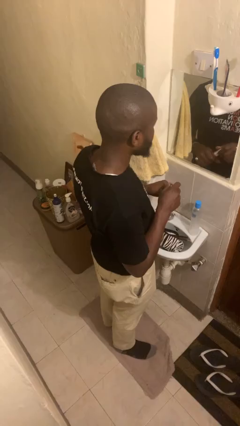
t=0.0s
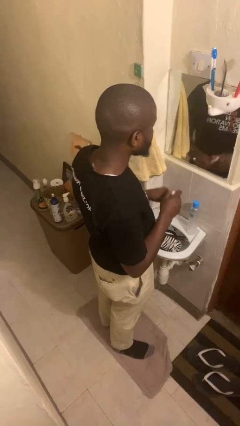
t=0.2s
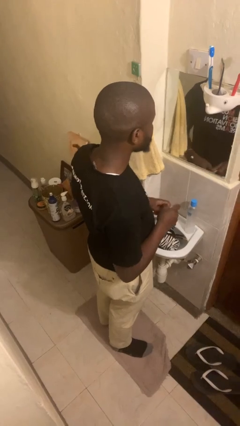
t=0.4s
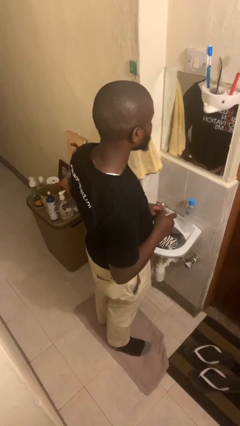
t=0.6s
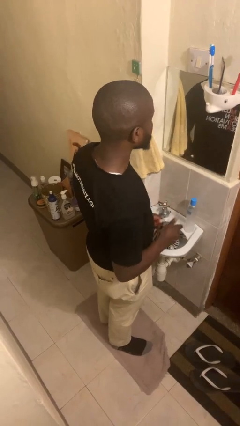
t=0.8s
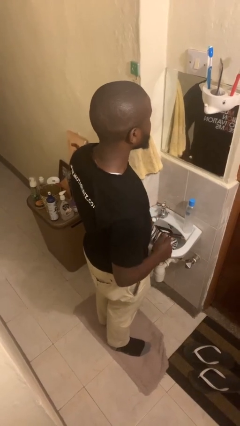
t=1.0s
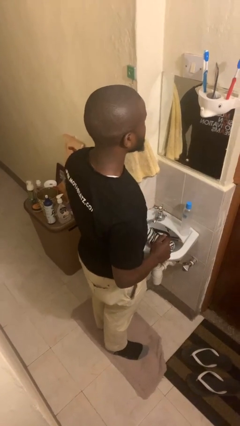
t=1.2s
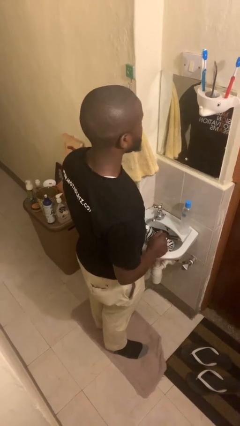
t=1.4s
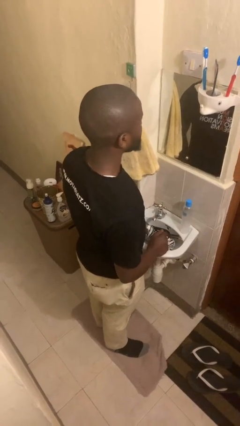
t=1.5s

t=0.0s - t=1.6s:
person applies lip makeup

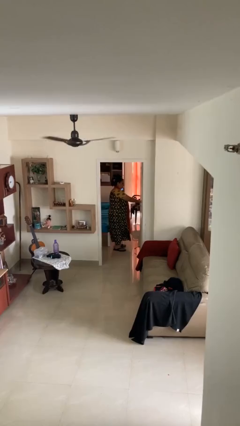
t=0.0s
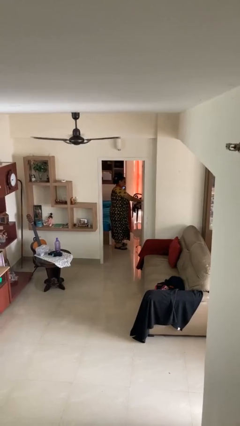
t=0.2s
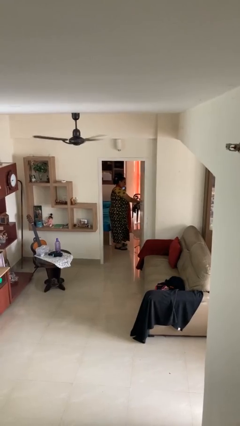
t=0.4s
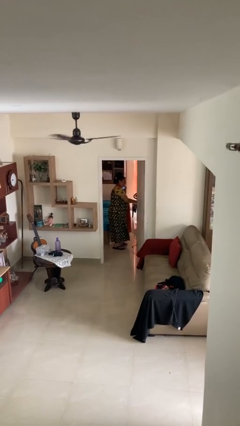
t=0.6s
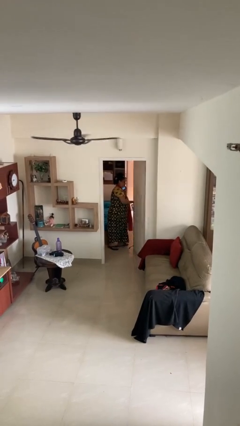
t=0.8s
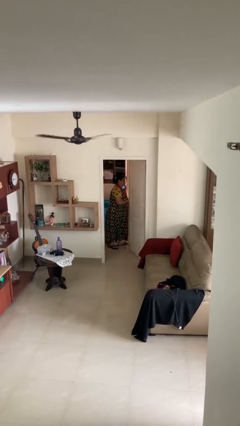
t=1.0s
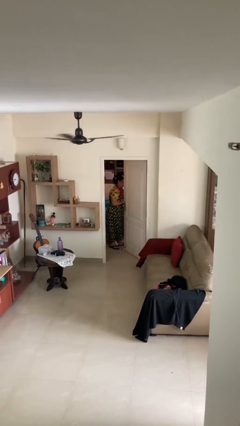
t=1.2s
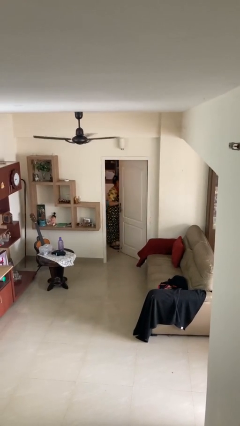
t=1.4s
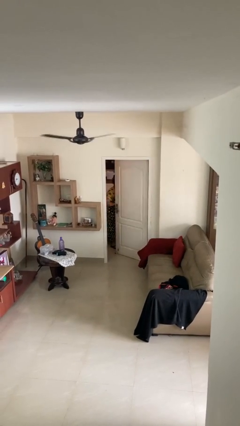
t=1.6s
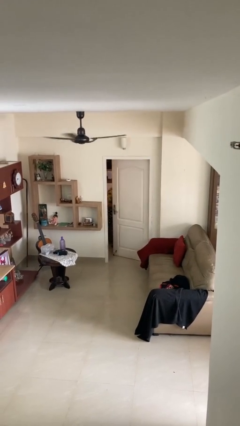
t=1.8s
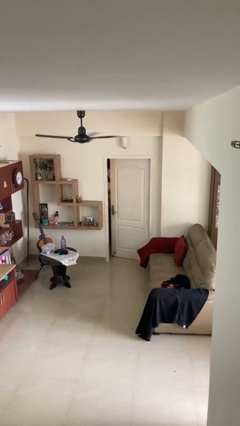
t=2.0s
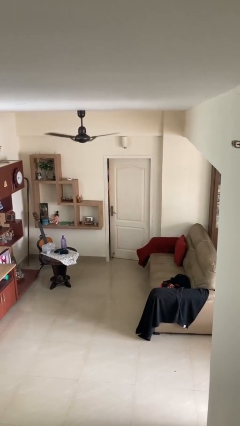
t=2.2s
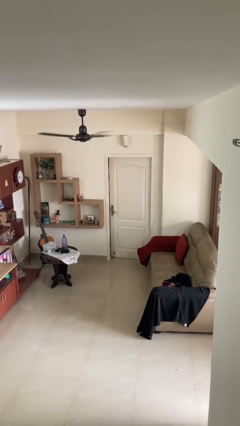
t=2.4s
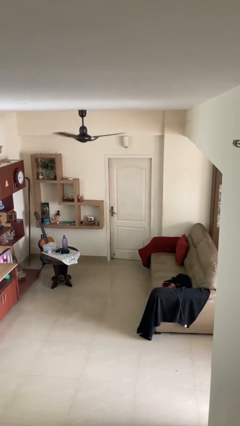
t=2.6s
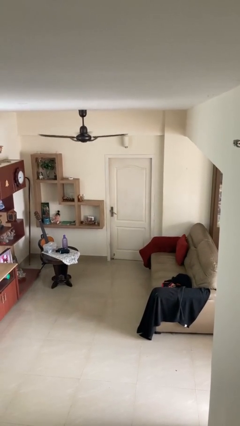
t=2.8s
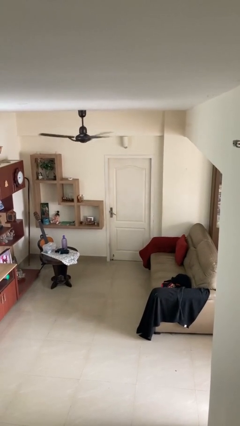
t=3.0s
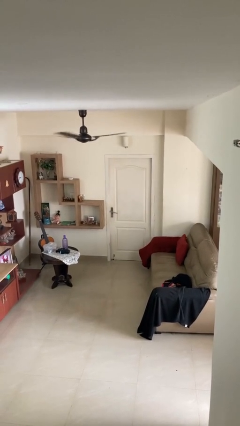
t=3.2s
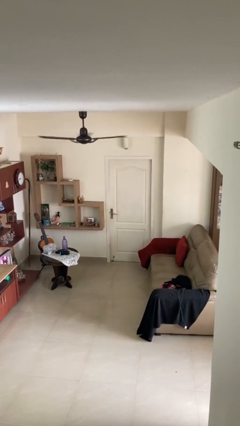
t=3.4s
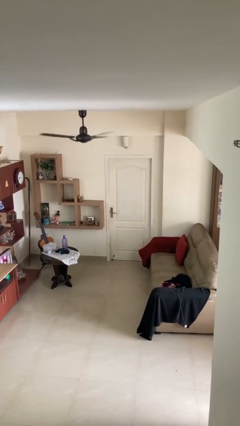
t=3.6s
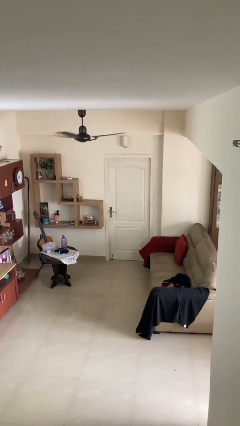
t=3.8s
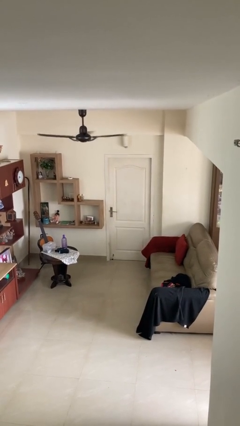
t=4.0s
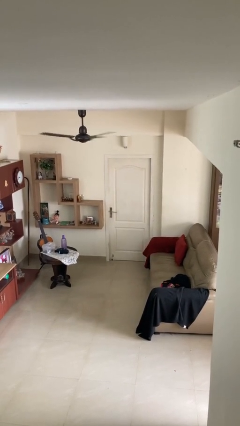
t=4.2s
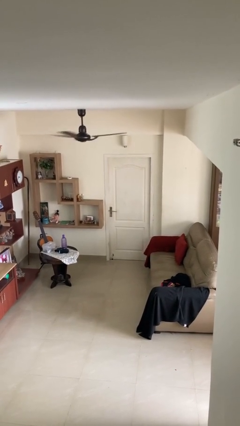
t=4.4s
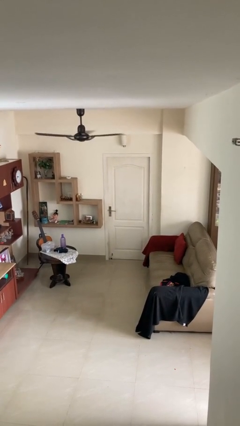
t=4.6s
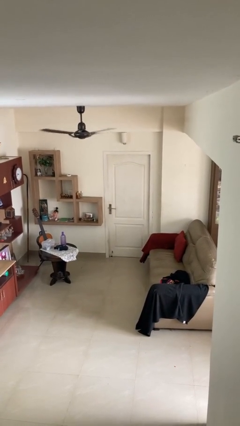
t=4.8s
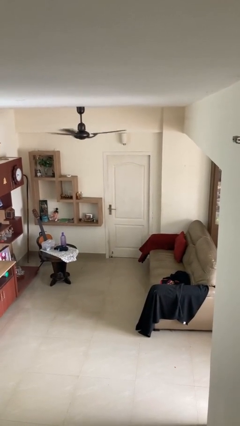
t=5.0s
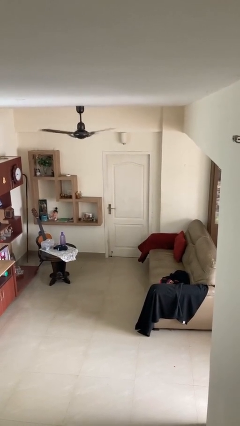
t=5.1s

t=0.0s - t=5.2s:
person closes facility door

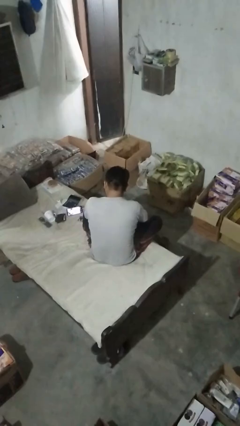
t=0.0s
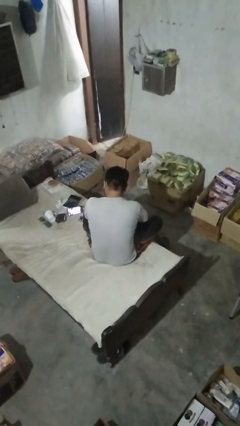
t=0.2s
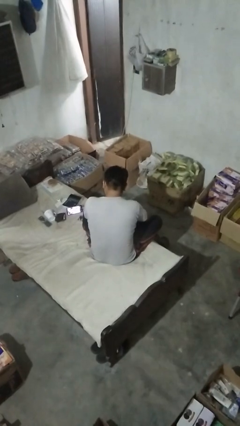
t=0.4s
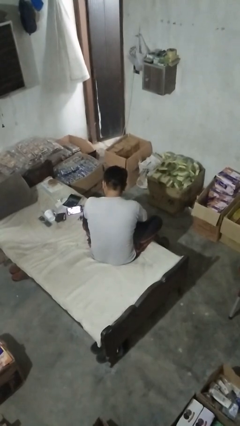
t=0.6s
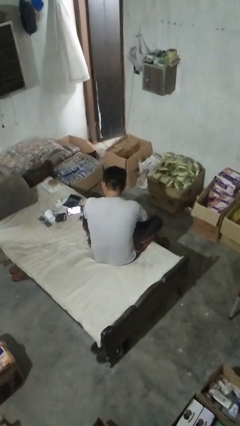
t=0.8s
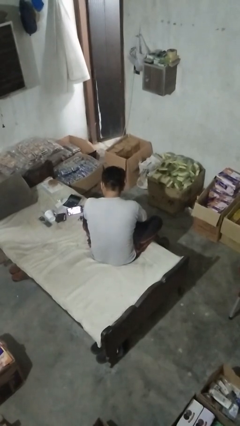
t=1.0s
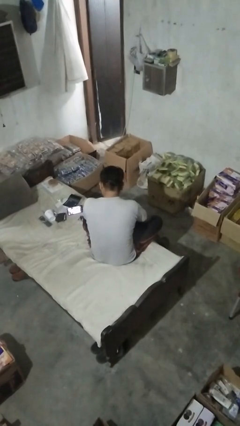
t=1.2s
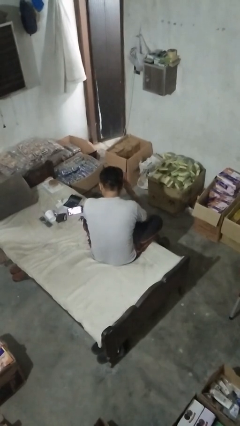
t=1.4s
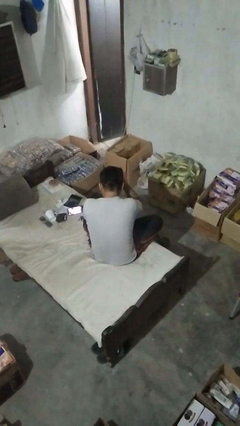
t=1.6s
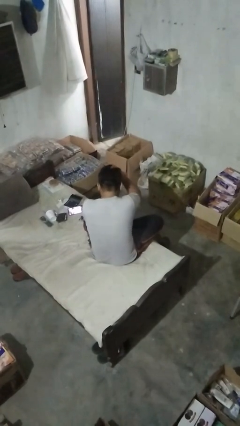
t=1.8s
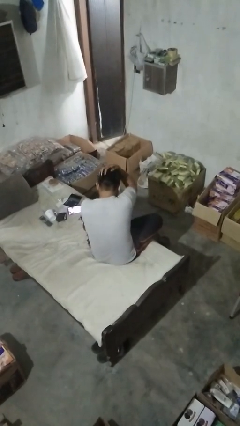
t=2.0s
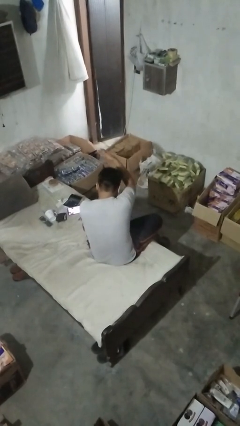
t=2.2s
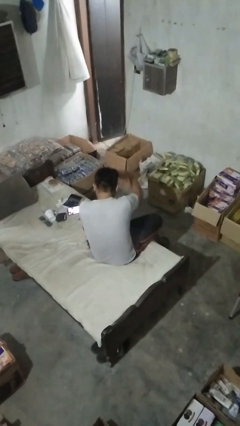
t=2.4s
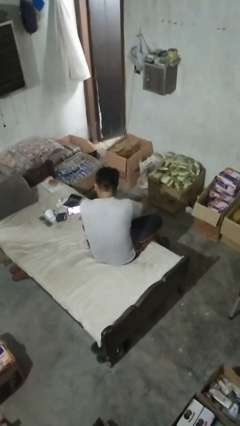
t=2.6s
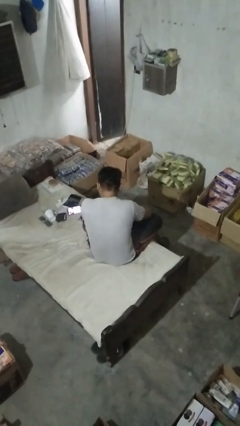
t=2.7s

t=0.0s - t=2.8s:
person strokes hair

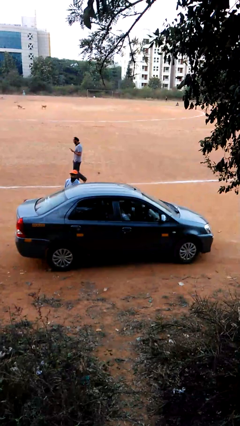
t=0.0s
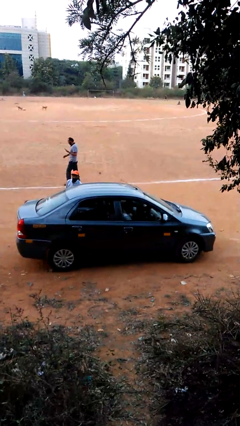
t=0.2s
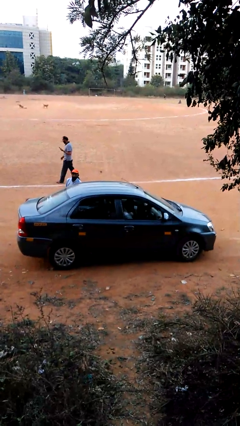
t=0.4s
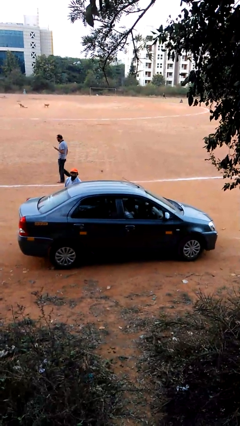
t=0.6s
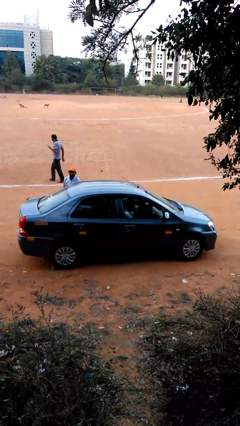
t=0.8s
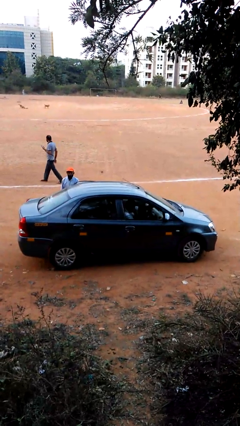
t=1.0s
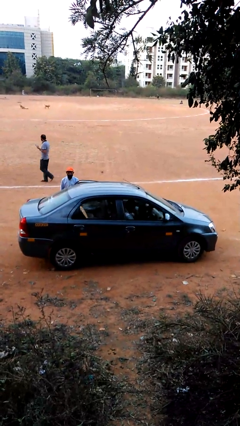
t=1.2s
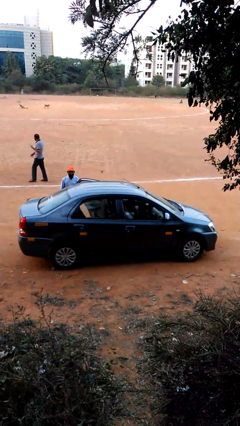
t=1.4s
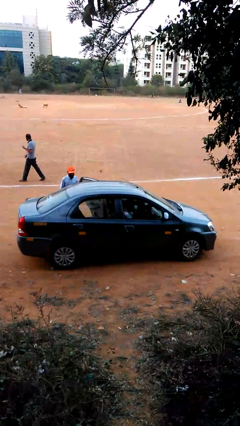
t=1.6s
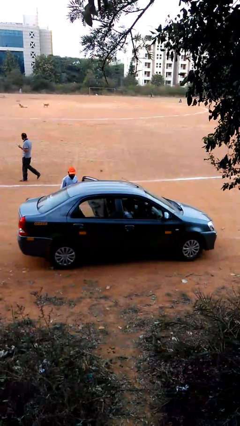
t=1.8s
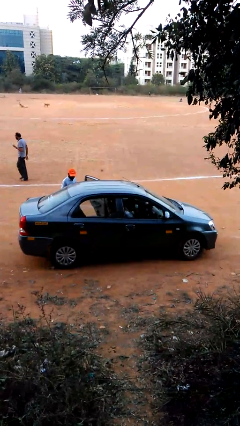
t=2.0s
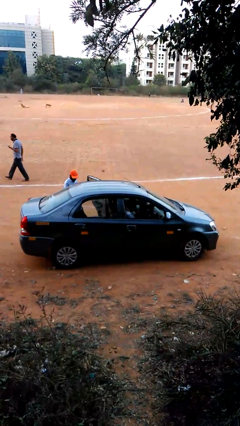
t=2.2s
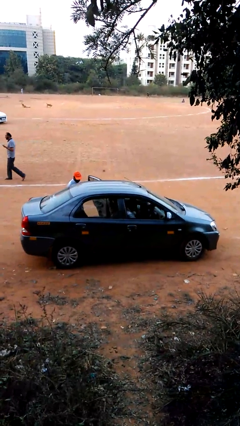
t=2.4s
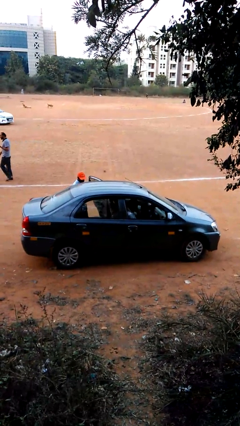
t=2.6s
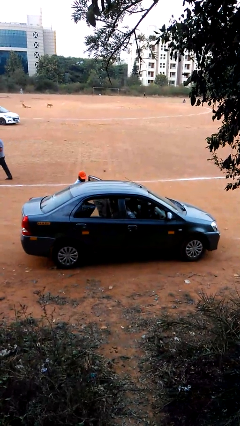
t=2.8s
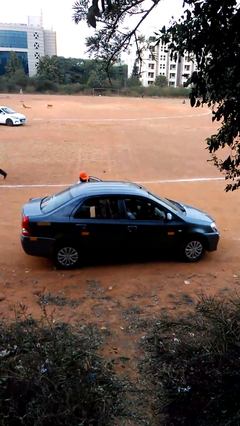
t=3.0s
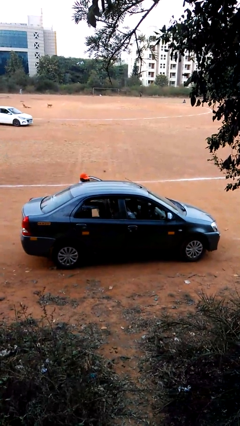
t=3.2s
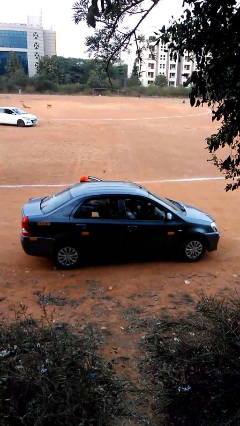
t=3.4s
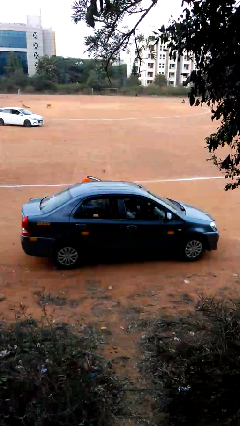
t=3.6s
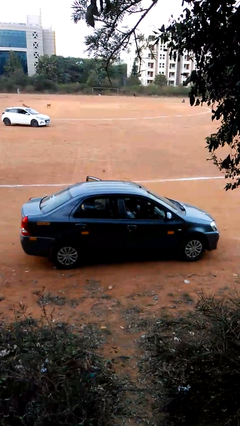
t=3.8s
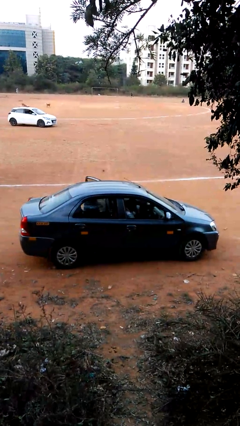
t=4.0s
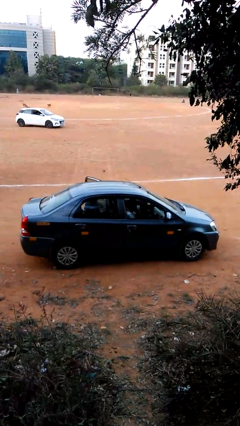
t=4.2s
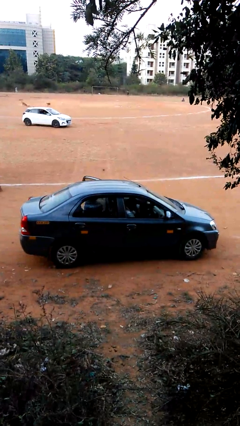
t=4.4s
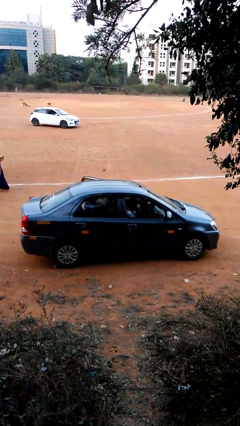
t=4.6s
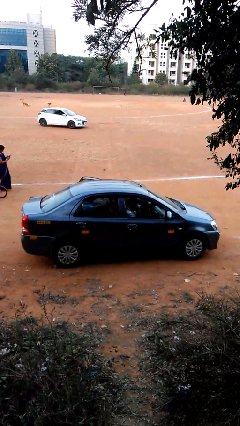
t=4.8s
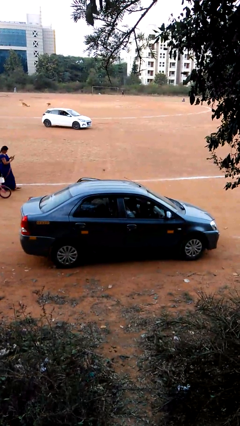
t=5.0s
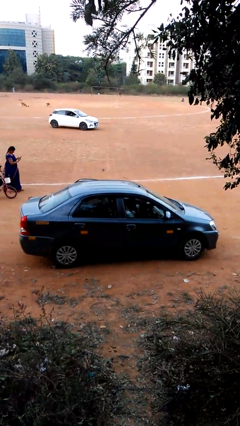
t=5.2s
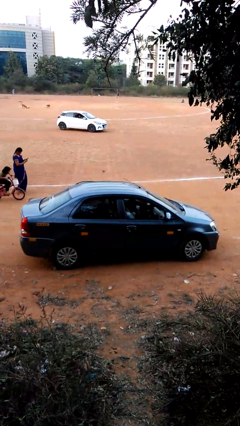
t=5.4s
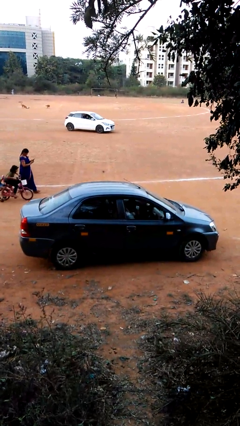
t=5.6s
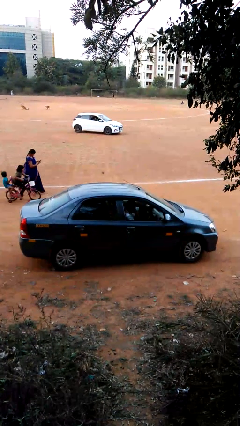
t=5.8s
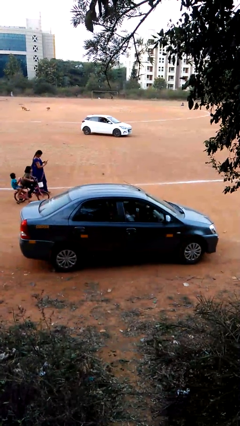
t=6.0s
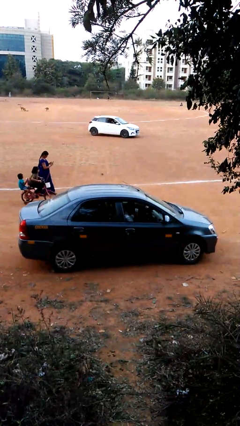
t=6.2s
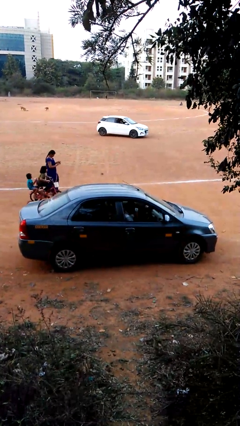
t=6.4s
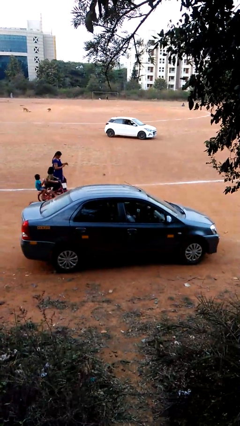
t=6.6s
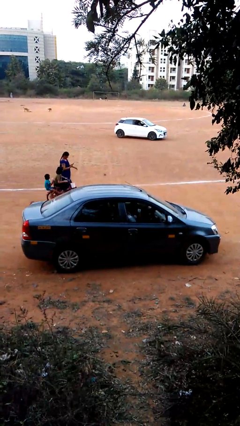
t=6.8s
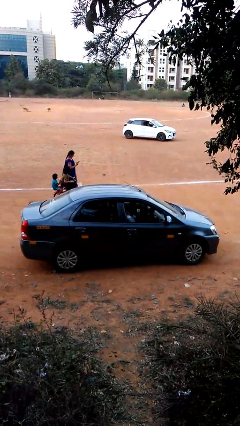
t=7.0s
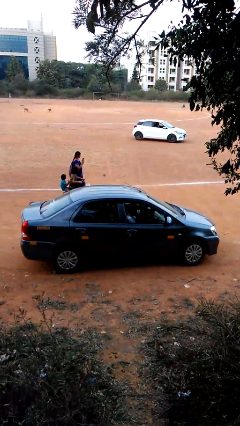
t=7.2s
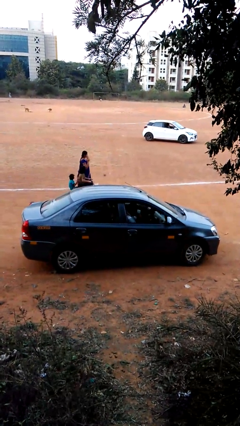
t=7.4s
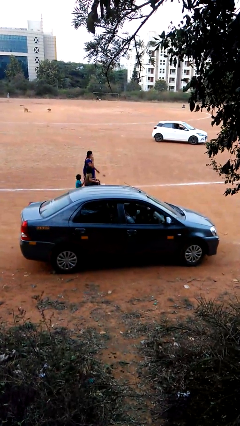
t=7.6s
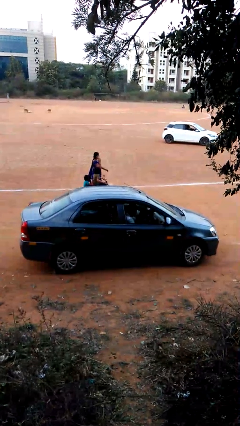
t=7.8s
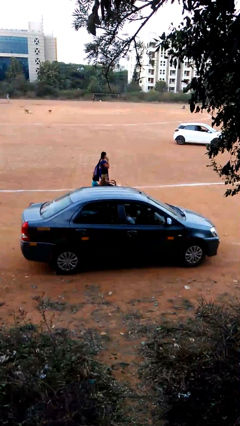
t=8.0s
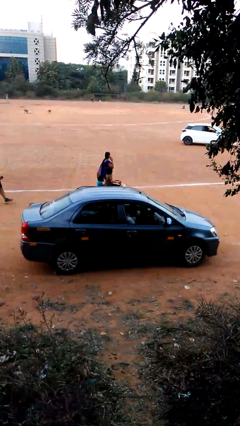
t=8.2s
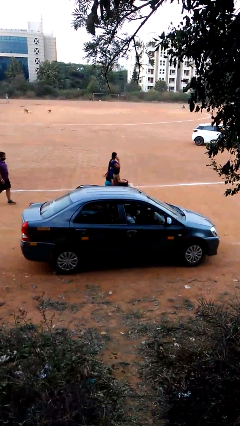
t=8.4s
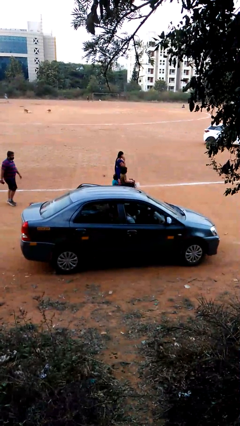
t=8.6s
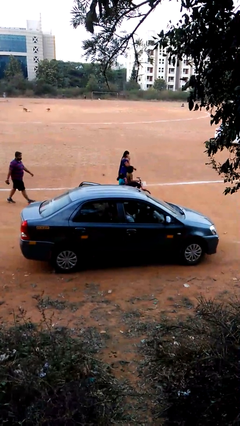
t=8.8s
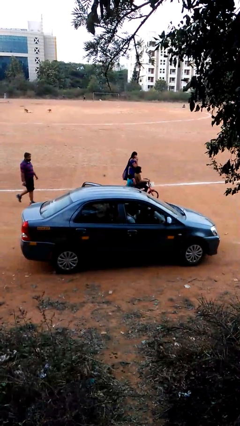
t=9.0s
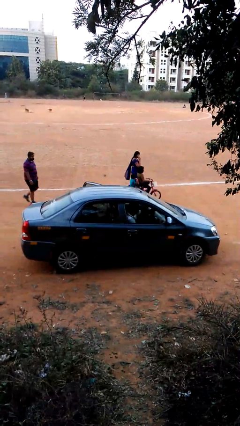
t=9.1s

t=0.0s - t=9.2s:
car picks up person
